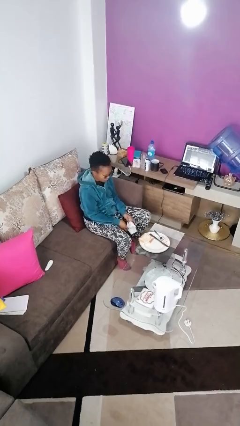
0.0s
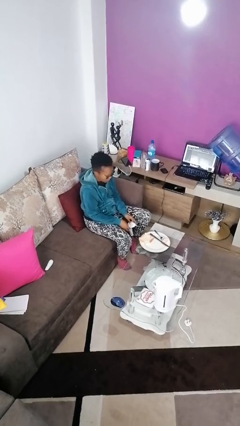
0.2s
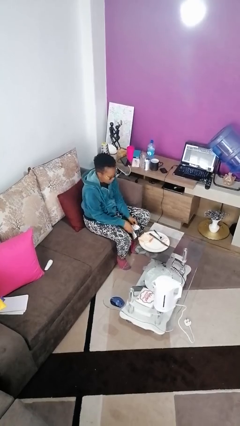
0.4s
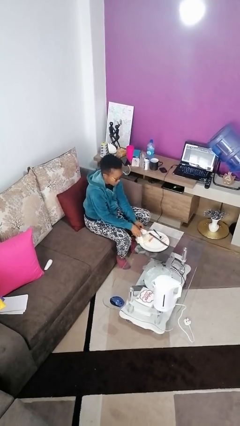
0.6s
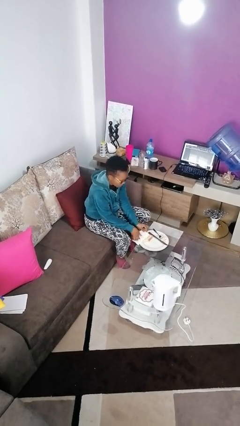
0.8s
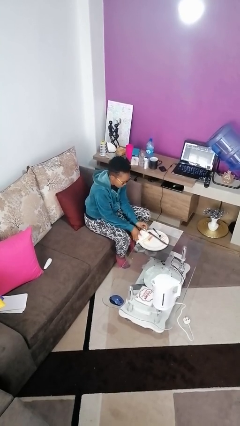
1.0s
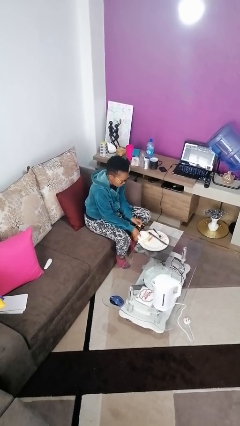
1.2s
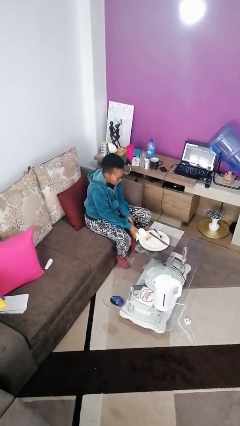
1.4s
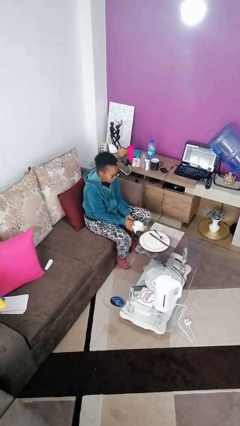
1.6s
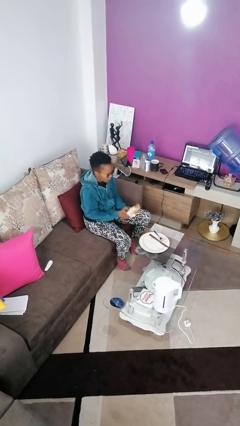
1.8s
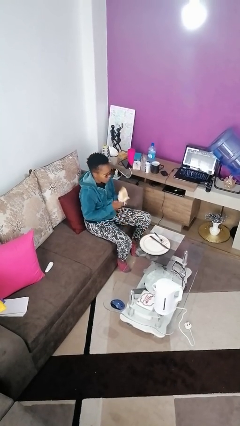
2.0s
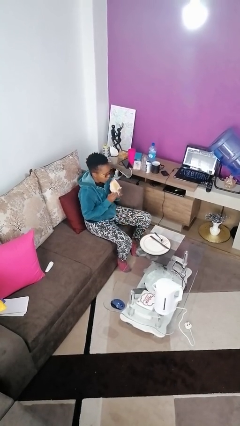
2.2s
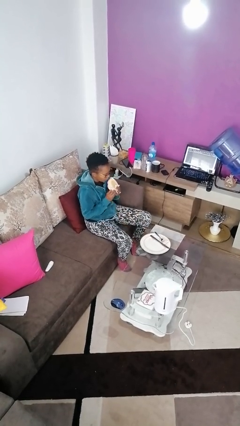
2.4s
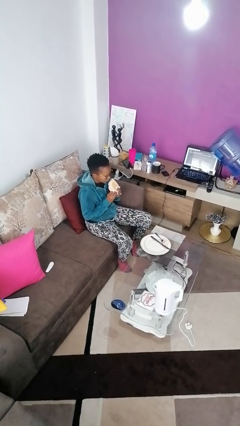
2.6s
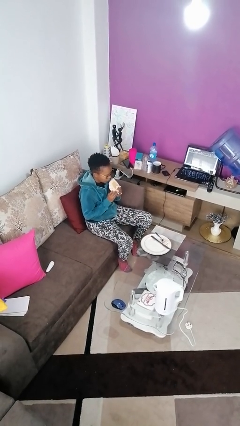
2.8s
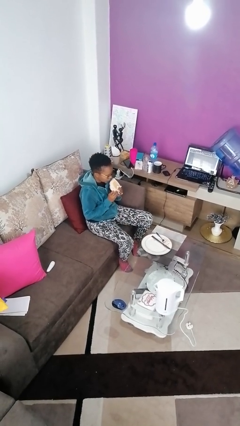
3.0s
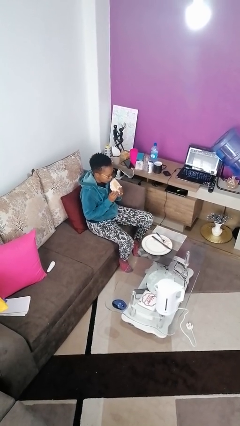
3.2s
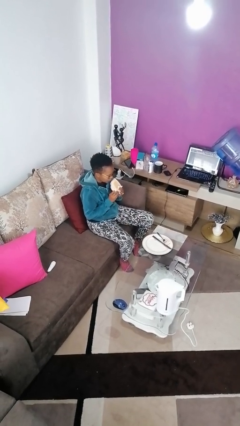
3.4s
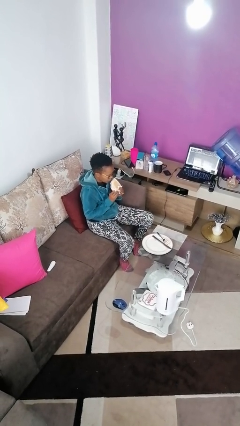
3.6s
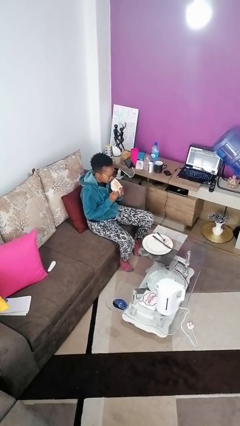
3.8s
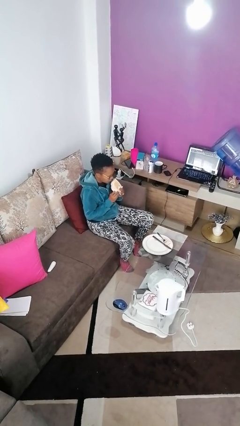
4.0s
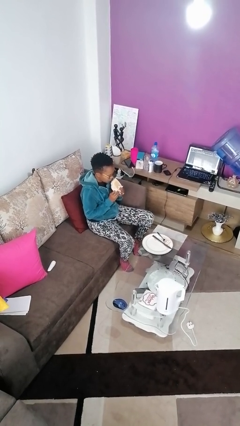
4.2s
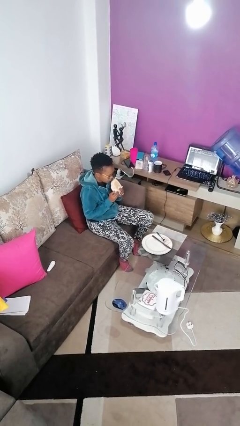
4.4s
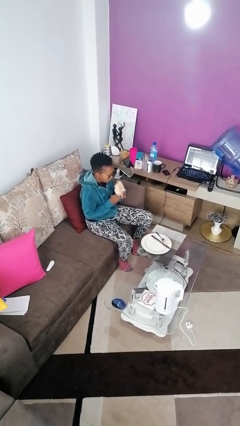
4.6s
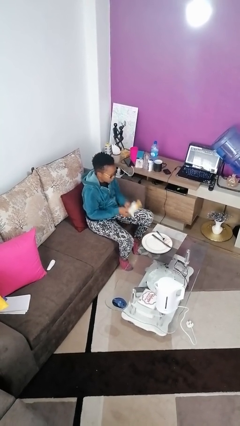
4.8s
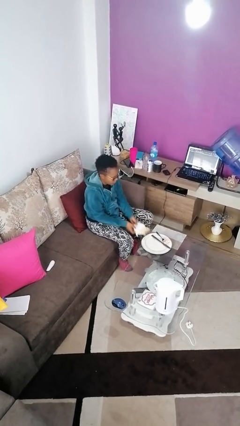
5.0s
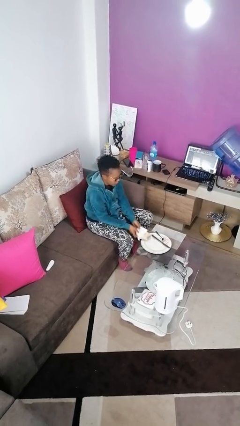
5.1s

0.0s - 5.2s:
person eats with hands

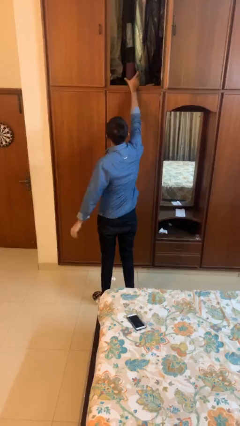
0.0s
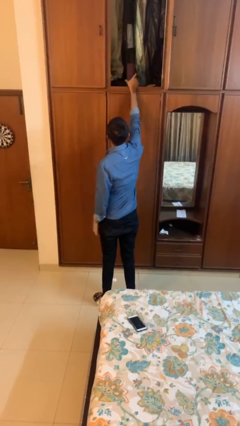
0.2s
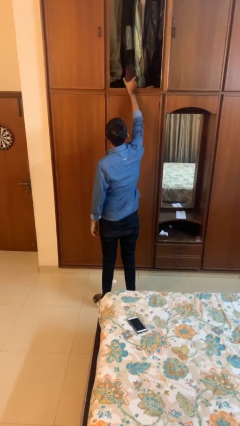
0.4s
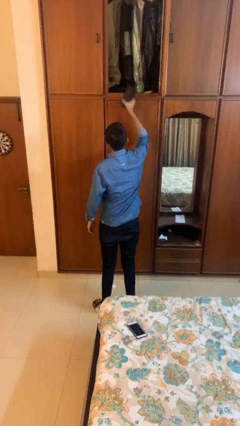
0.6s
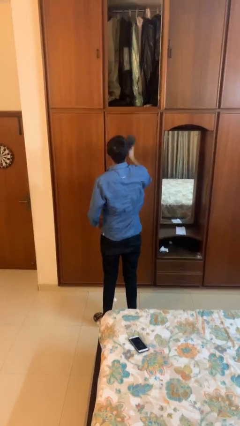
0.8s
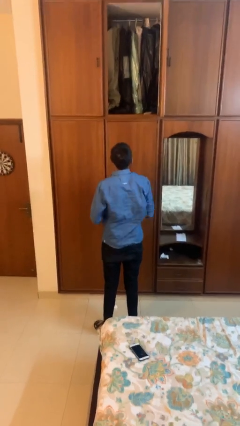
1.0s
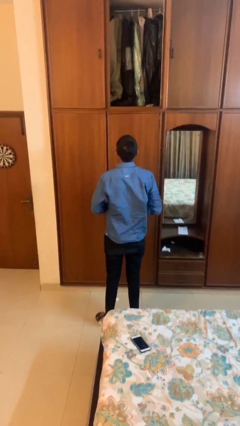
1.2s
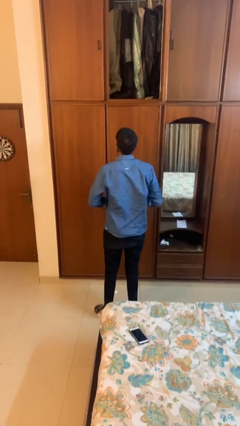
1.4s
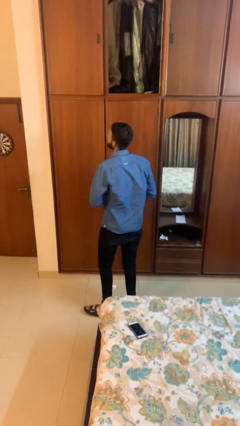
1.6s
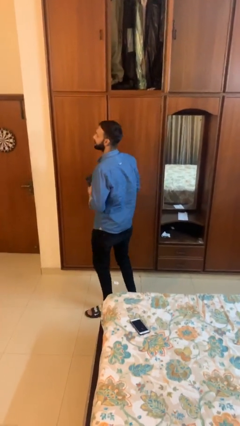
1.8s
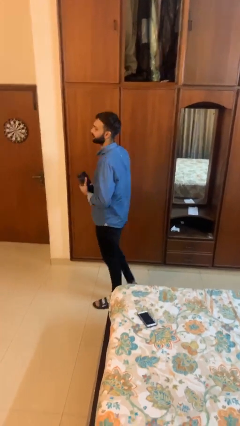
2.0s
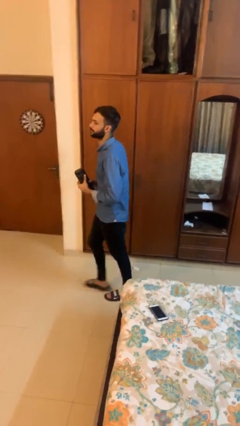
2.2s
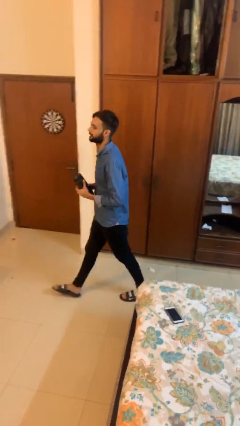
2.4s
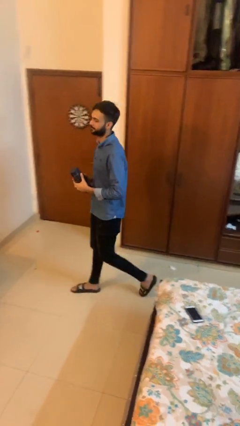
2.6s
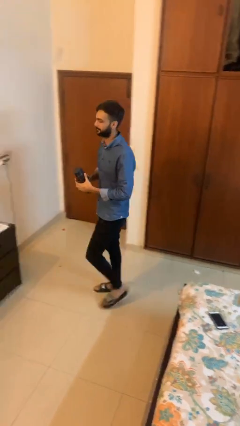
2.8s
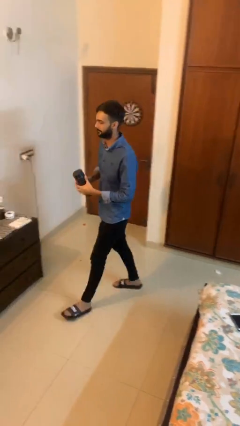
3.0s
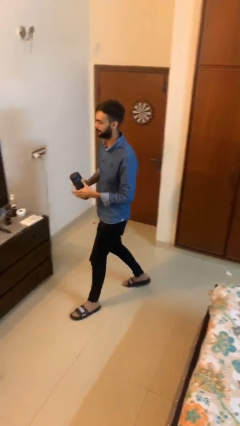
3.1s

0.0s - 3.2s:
person picks up object from shelf

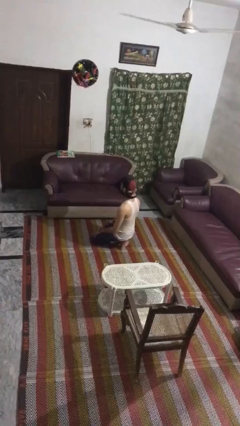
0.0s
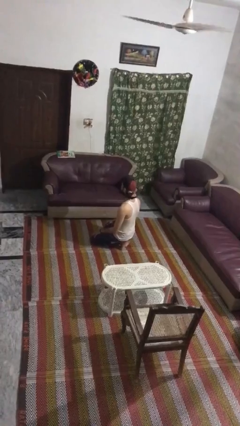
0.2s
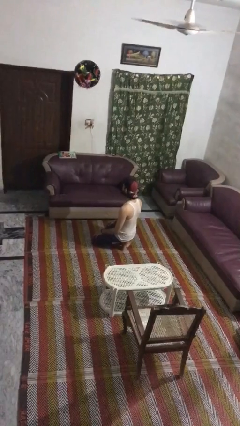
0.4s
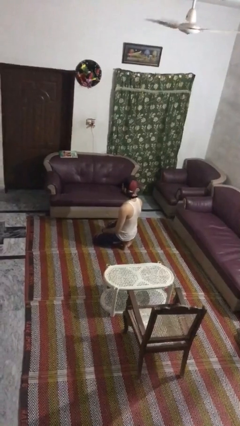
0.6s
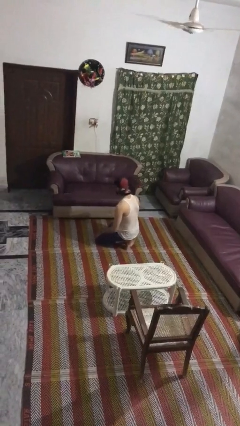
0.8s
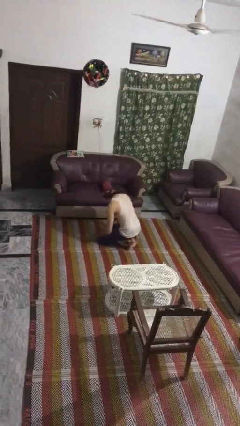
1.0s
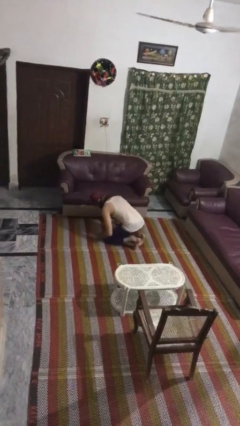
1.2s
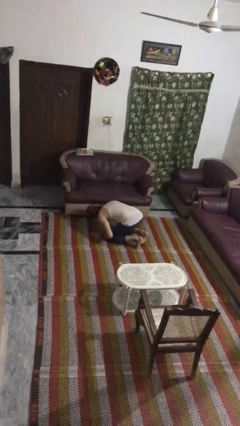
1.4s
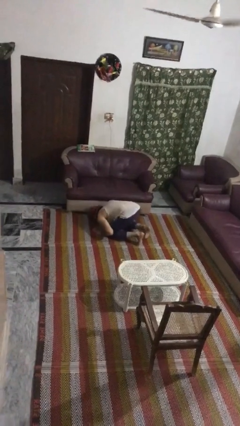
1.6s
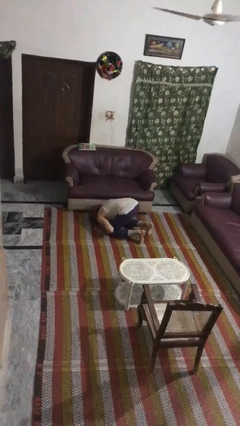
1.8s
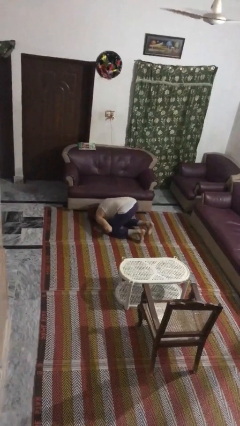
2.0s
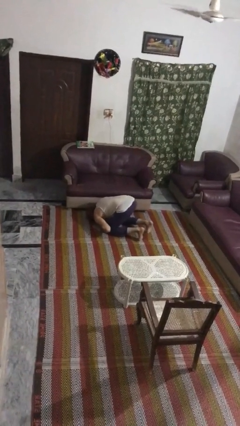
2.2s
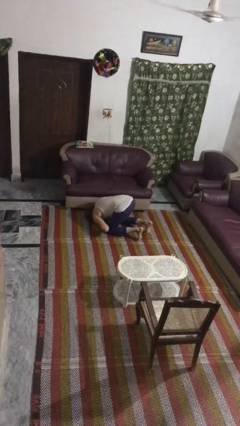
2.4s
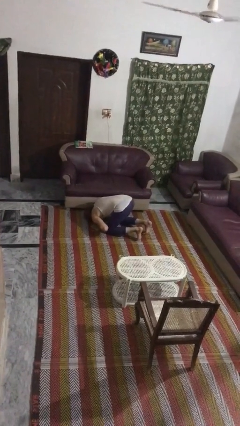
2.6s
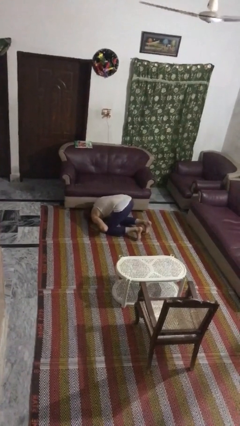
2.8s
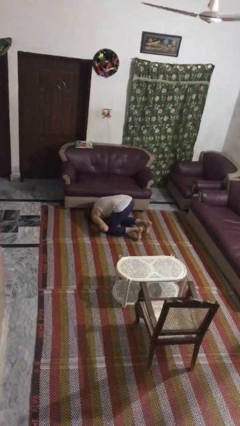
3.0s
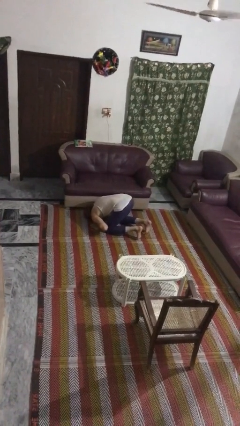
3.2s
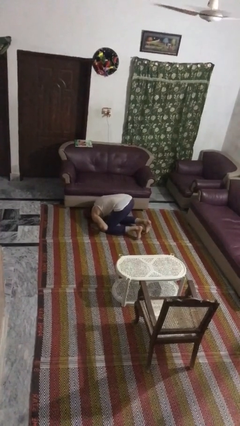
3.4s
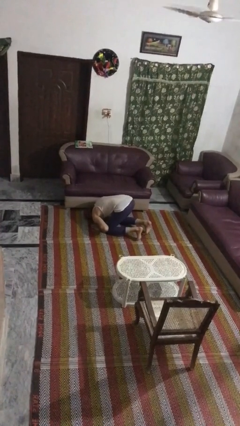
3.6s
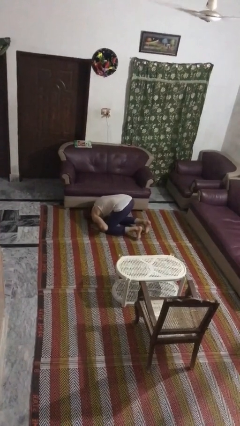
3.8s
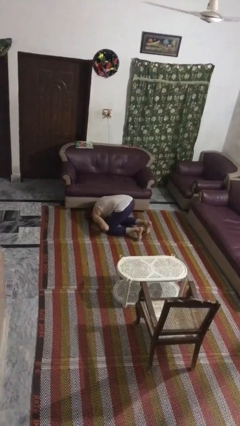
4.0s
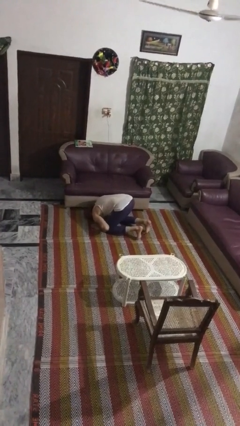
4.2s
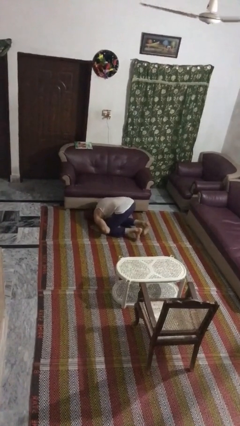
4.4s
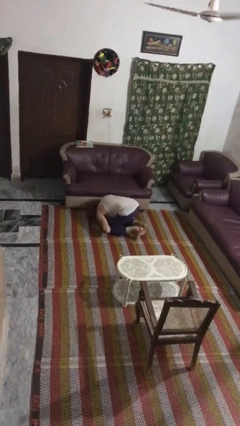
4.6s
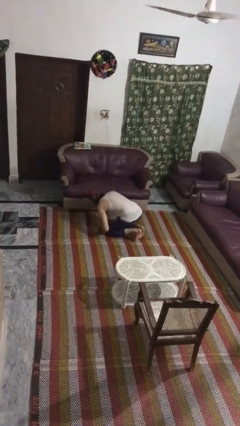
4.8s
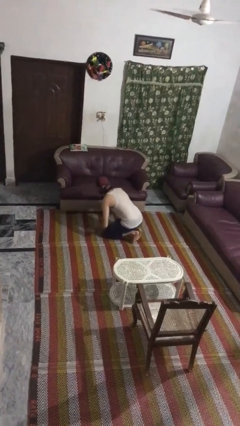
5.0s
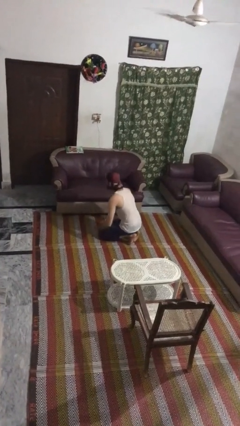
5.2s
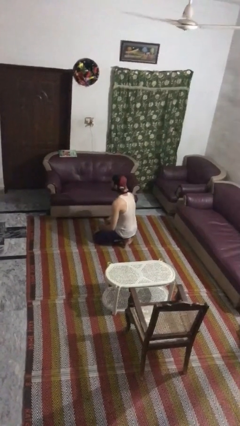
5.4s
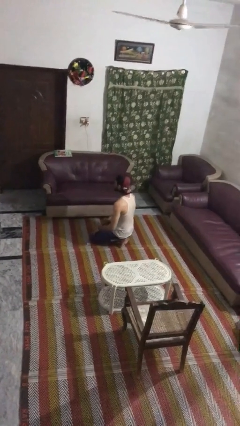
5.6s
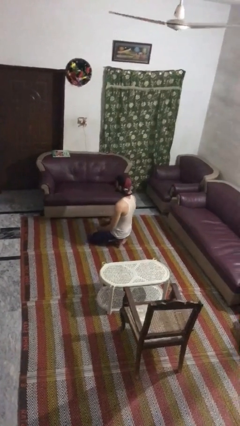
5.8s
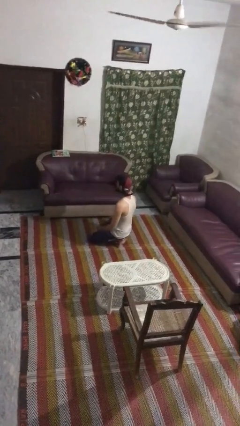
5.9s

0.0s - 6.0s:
person searches under couch

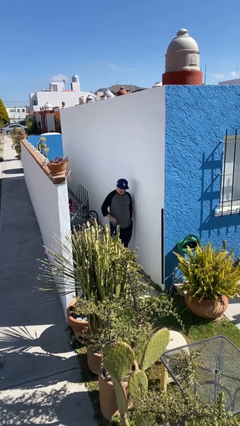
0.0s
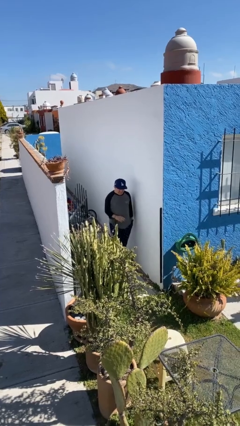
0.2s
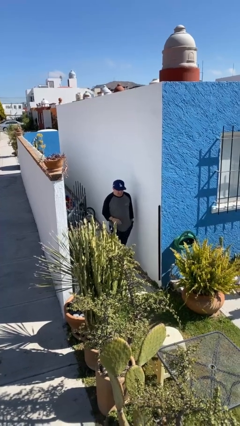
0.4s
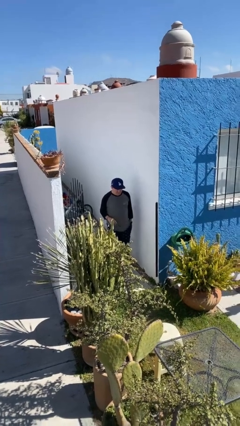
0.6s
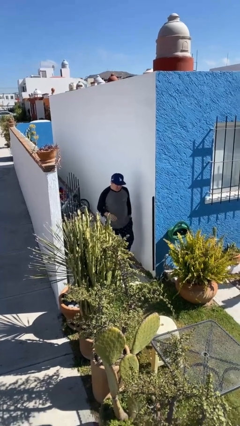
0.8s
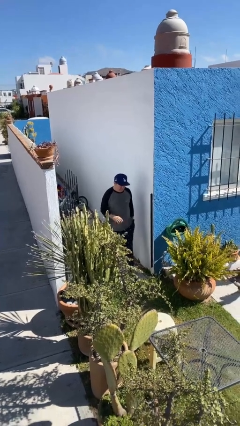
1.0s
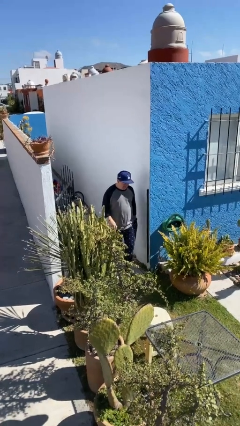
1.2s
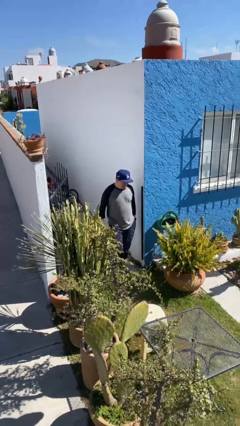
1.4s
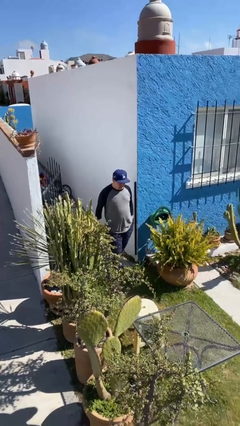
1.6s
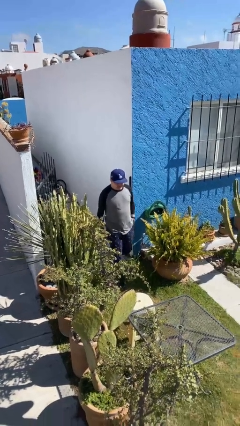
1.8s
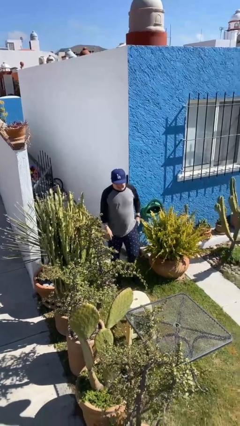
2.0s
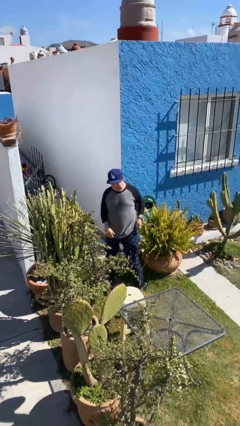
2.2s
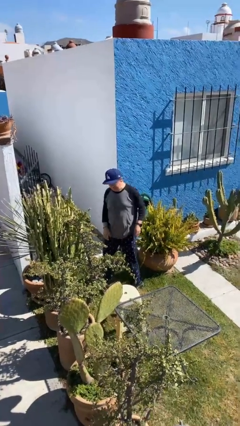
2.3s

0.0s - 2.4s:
person enters scene through structure

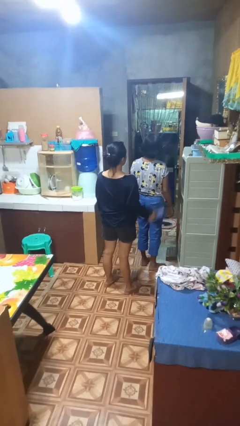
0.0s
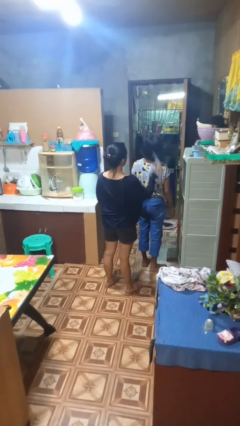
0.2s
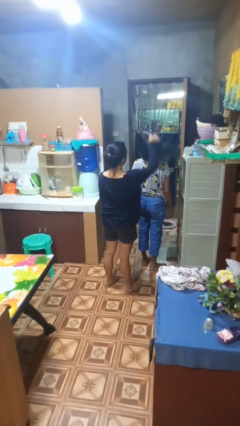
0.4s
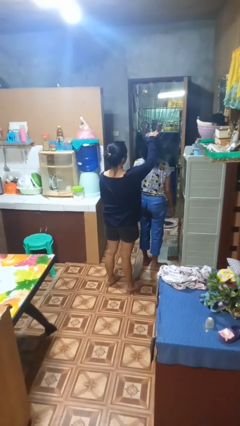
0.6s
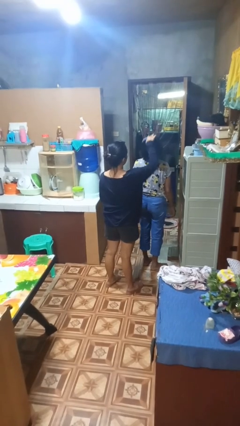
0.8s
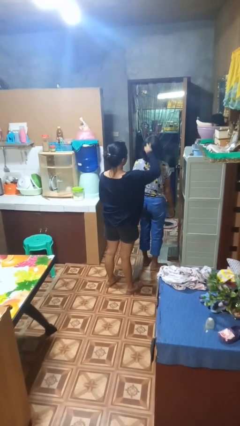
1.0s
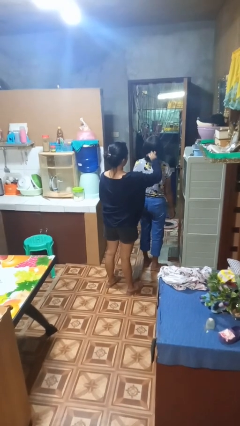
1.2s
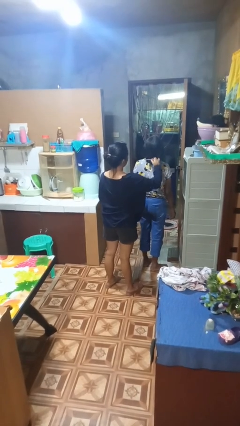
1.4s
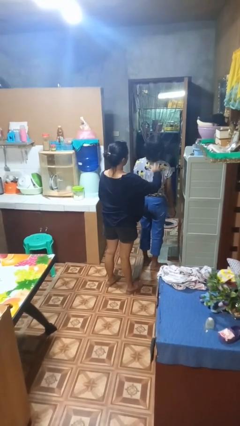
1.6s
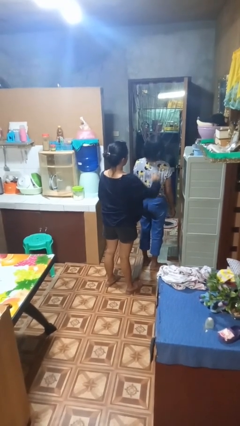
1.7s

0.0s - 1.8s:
person brushes hair of person
